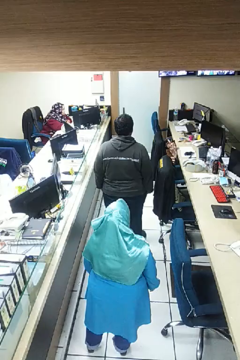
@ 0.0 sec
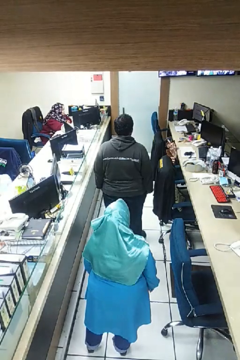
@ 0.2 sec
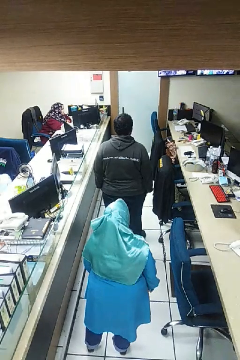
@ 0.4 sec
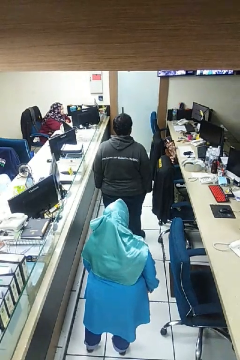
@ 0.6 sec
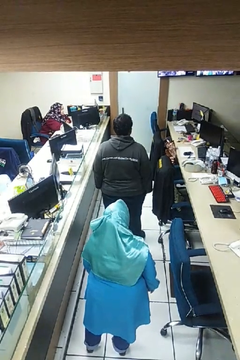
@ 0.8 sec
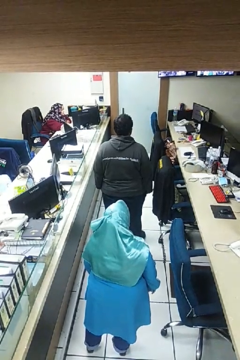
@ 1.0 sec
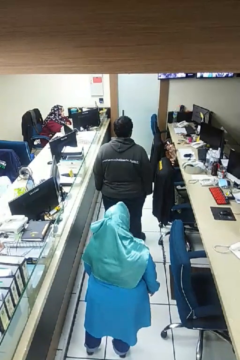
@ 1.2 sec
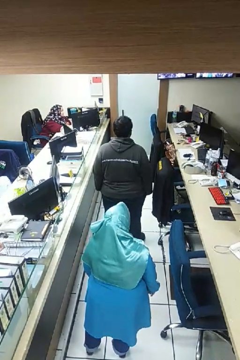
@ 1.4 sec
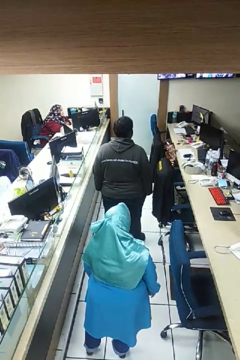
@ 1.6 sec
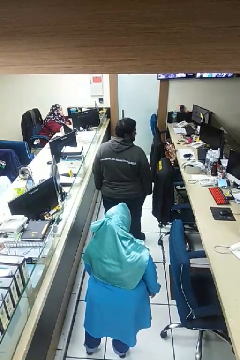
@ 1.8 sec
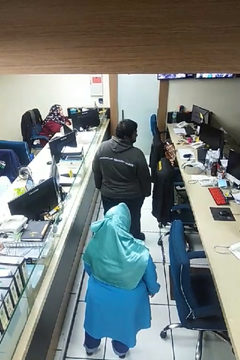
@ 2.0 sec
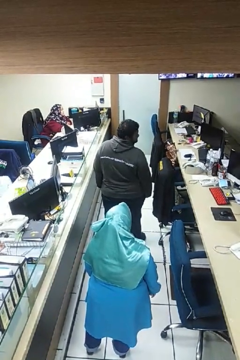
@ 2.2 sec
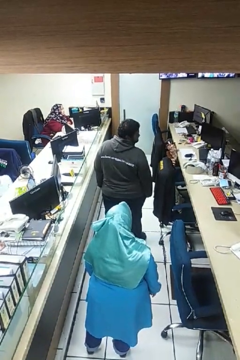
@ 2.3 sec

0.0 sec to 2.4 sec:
person looks over shoulder

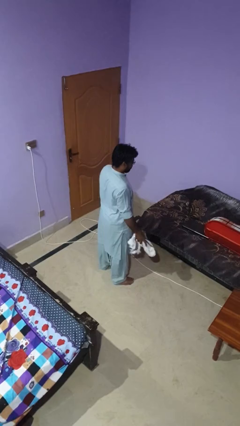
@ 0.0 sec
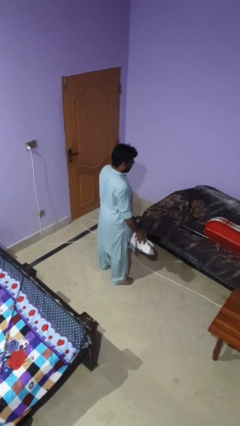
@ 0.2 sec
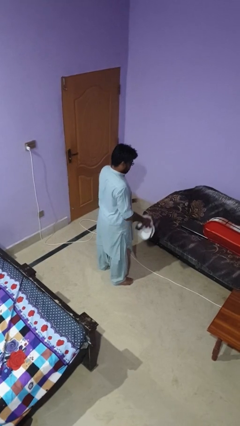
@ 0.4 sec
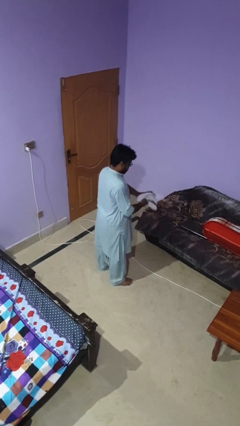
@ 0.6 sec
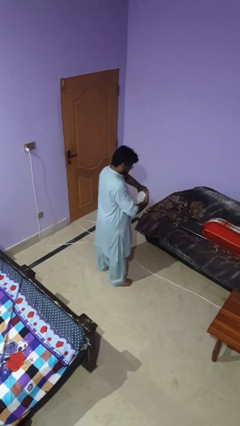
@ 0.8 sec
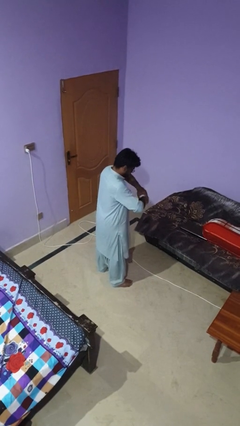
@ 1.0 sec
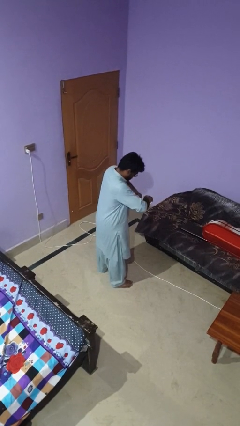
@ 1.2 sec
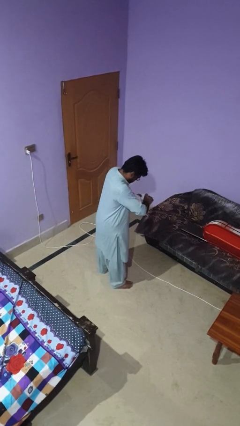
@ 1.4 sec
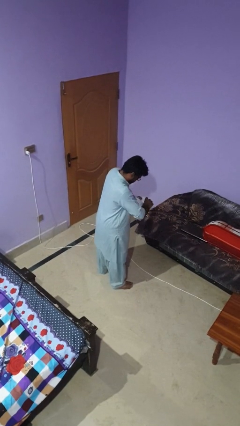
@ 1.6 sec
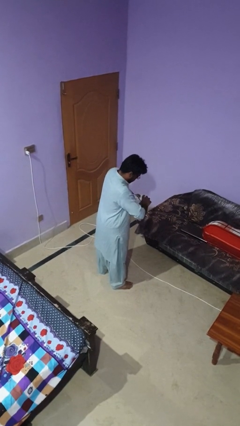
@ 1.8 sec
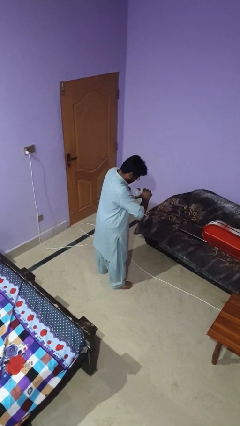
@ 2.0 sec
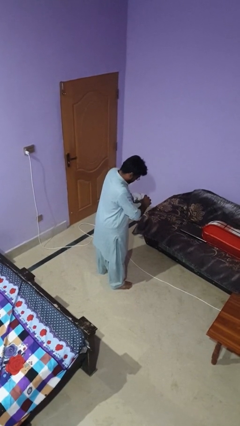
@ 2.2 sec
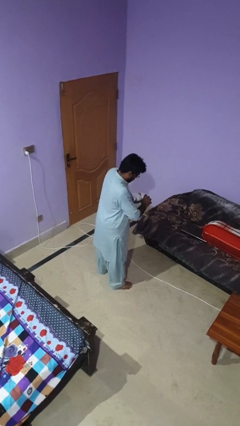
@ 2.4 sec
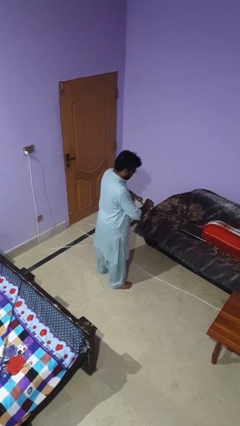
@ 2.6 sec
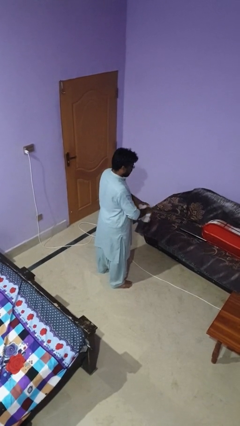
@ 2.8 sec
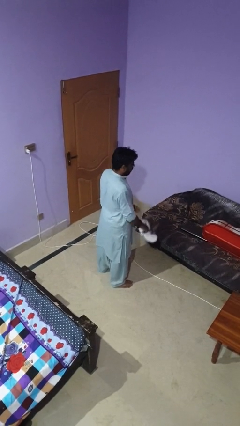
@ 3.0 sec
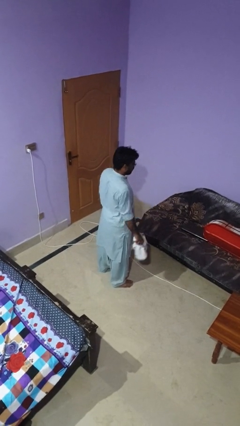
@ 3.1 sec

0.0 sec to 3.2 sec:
person squeezes object

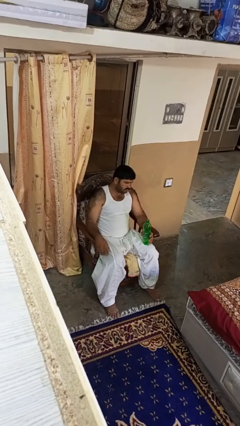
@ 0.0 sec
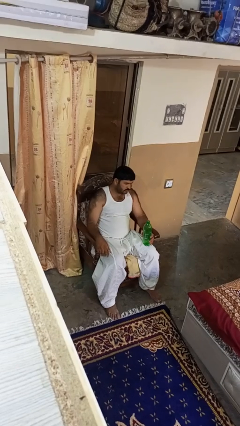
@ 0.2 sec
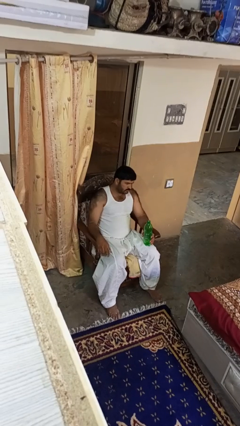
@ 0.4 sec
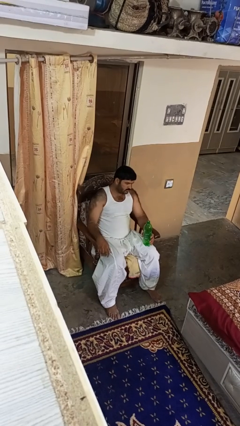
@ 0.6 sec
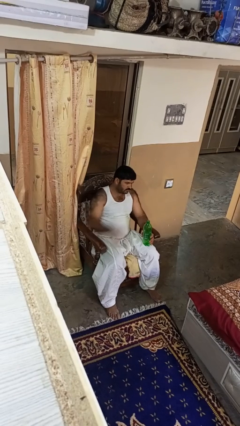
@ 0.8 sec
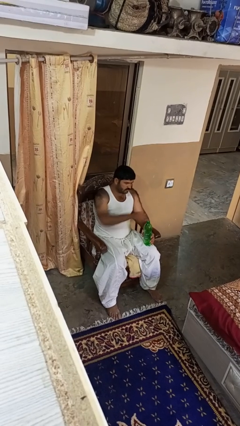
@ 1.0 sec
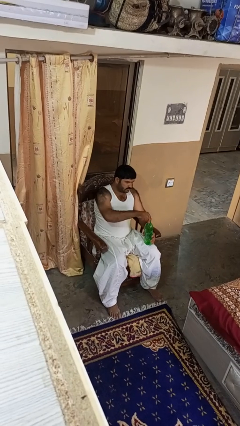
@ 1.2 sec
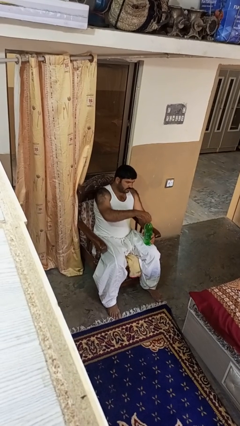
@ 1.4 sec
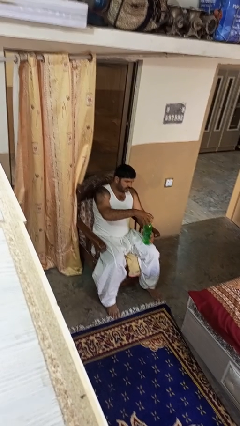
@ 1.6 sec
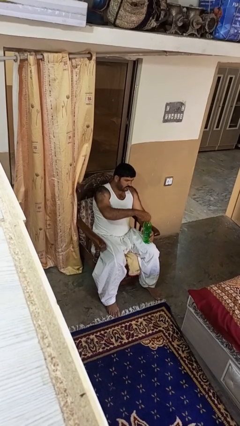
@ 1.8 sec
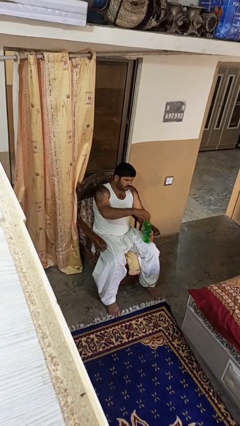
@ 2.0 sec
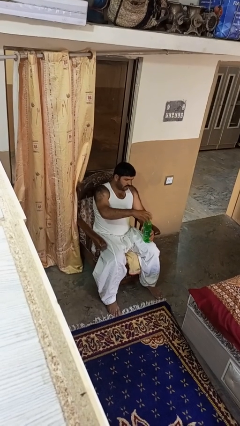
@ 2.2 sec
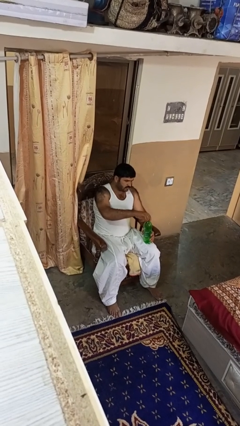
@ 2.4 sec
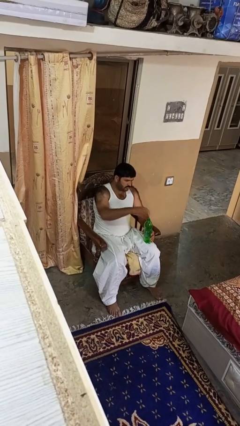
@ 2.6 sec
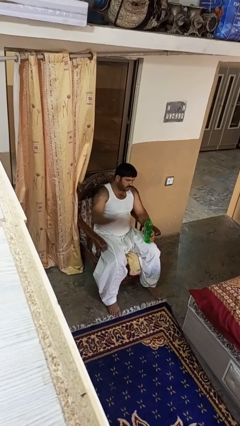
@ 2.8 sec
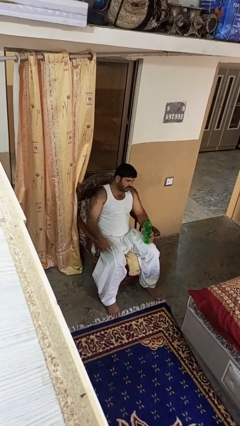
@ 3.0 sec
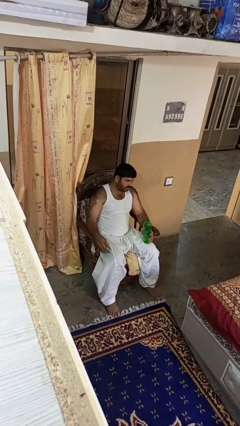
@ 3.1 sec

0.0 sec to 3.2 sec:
person unscrews lid from bottle

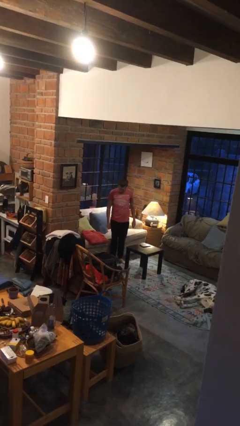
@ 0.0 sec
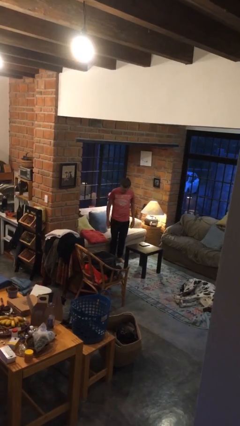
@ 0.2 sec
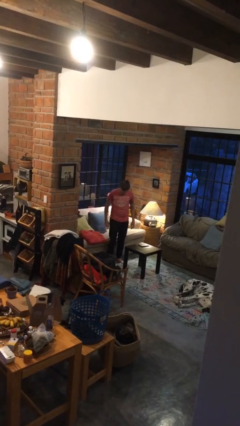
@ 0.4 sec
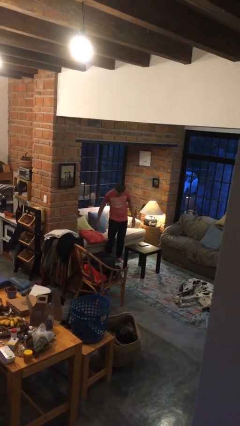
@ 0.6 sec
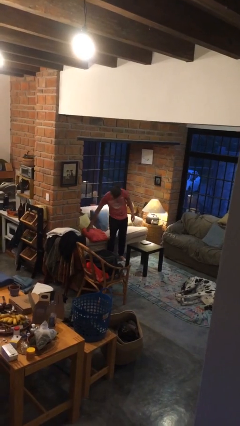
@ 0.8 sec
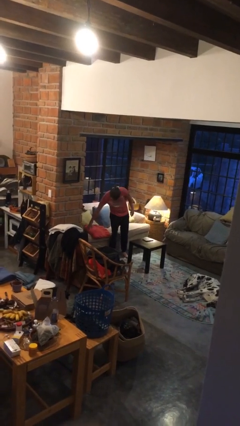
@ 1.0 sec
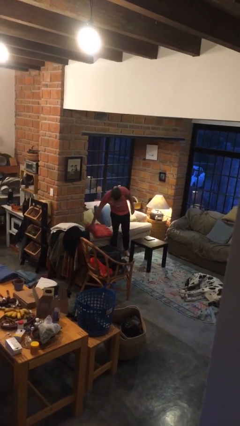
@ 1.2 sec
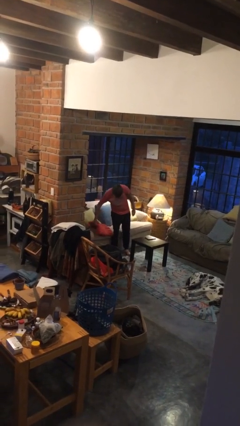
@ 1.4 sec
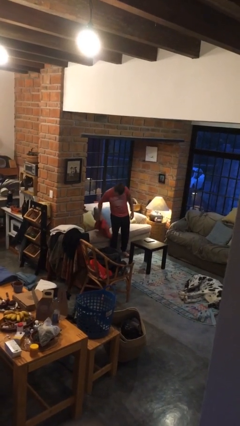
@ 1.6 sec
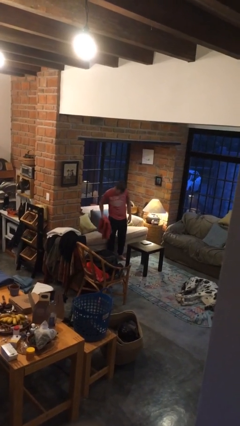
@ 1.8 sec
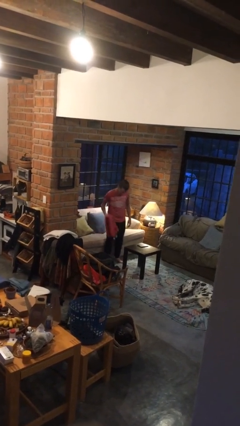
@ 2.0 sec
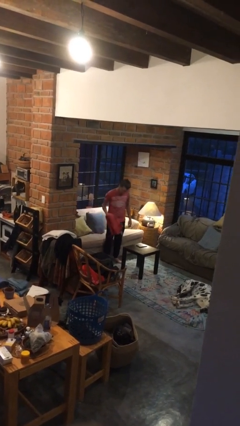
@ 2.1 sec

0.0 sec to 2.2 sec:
person picks up object from couch

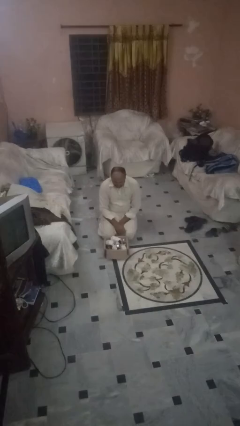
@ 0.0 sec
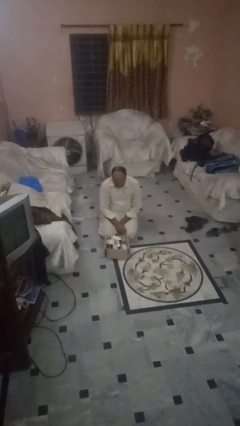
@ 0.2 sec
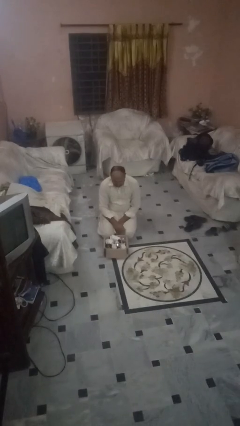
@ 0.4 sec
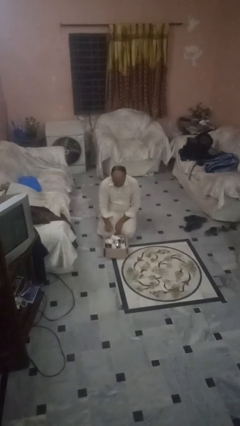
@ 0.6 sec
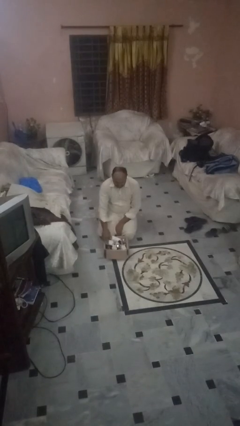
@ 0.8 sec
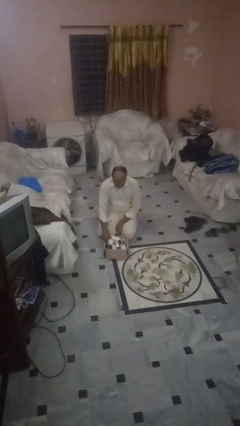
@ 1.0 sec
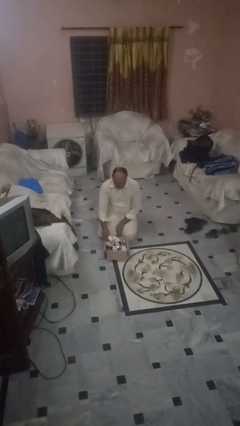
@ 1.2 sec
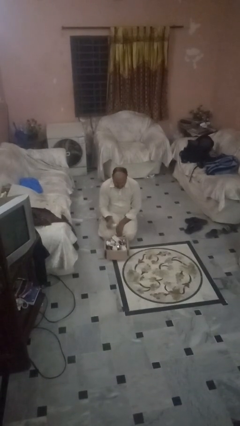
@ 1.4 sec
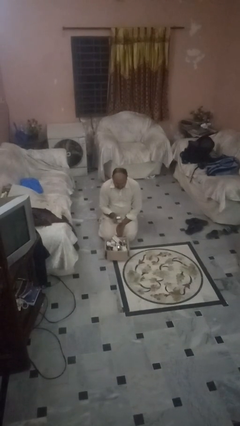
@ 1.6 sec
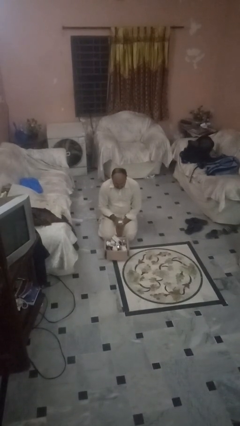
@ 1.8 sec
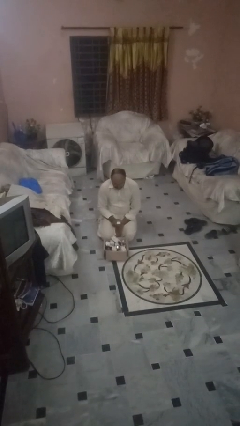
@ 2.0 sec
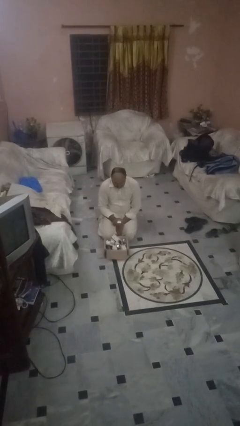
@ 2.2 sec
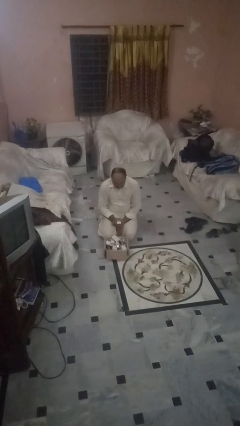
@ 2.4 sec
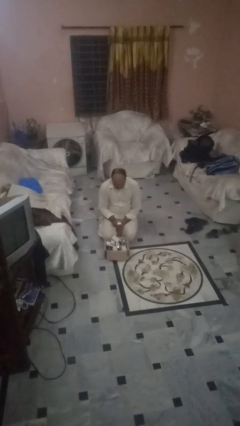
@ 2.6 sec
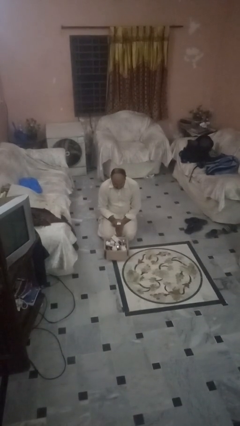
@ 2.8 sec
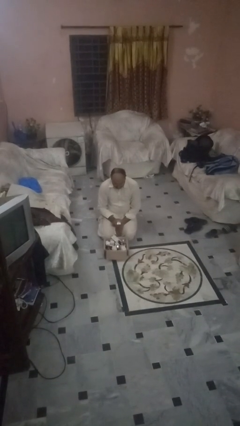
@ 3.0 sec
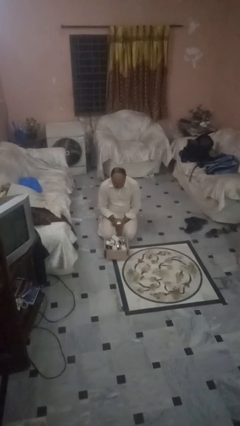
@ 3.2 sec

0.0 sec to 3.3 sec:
person takes object from box

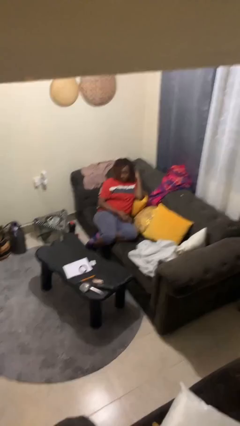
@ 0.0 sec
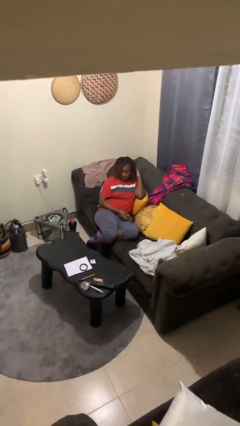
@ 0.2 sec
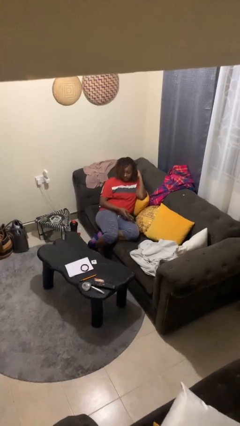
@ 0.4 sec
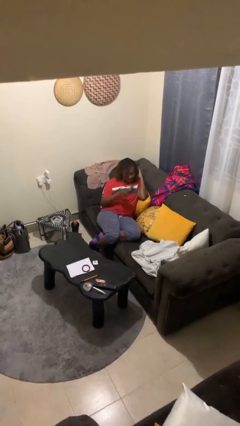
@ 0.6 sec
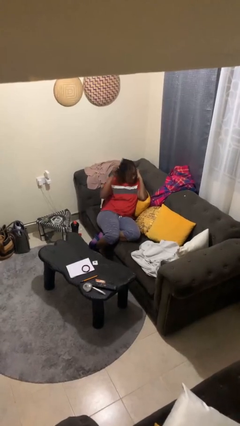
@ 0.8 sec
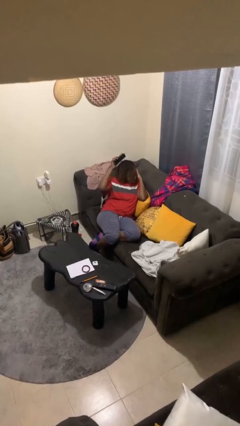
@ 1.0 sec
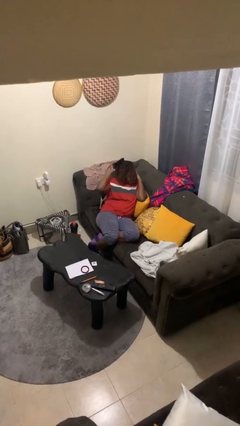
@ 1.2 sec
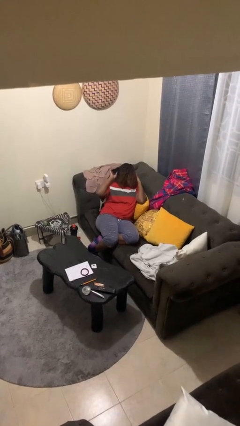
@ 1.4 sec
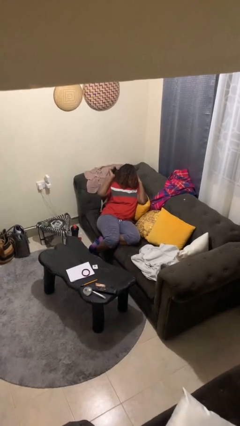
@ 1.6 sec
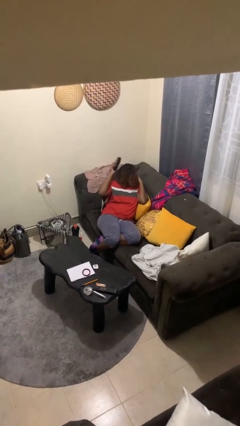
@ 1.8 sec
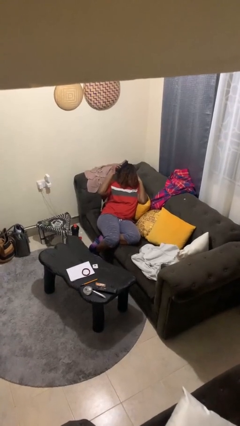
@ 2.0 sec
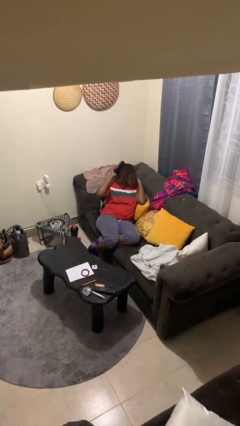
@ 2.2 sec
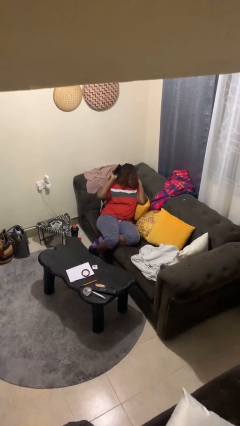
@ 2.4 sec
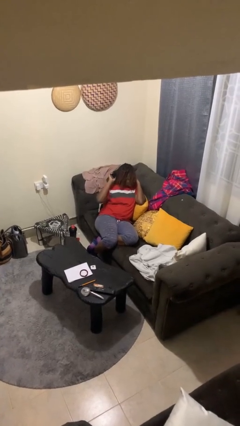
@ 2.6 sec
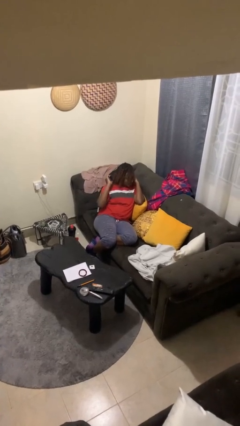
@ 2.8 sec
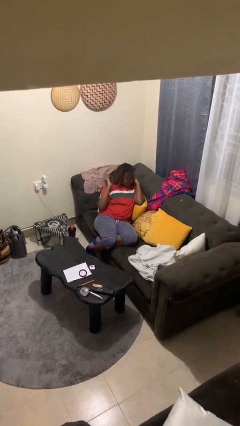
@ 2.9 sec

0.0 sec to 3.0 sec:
person brushes hair
